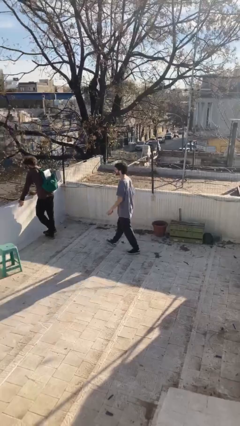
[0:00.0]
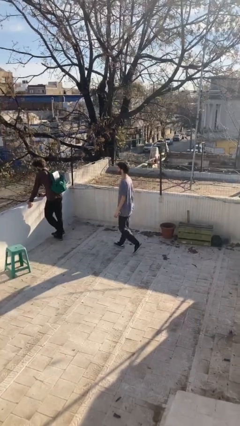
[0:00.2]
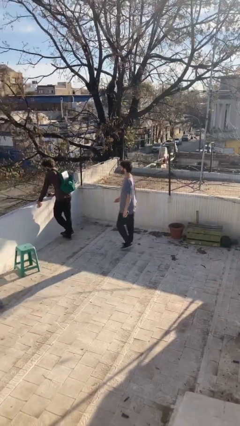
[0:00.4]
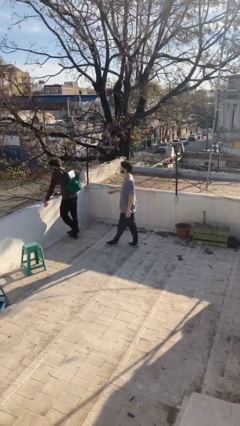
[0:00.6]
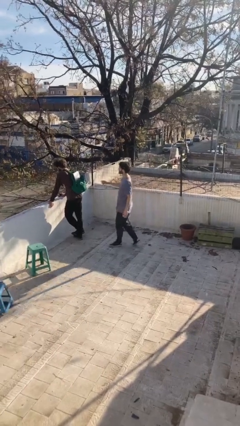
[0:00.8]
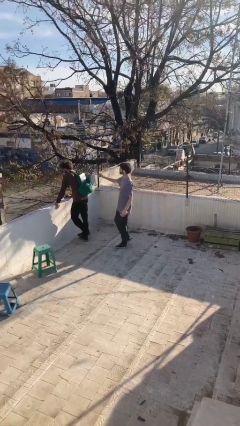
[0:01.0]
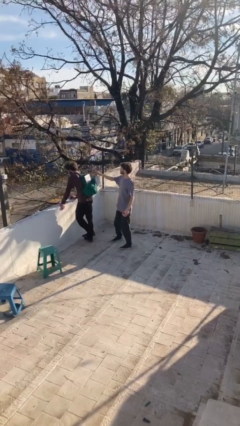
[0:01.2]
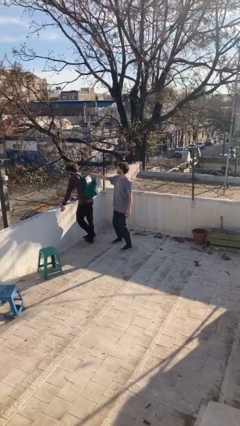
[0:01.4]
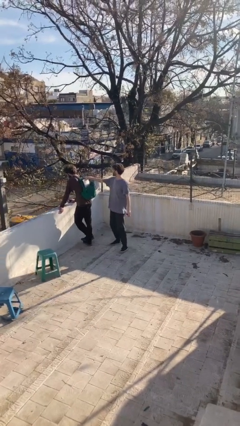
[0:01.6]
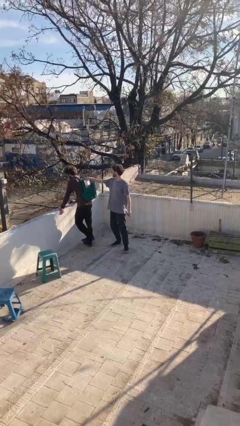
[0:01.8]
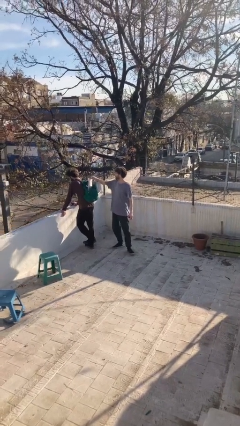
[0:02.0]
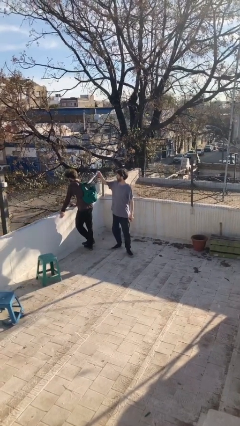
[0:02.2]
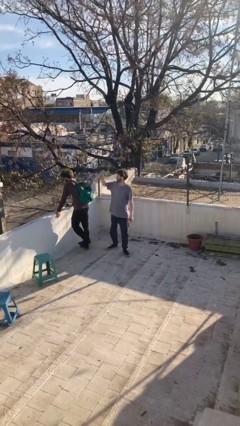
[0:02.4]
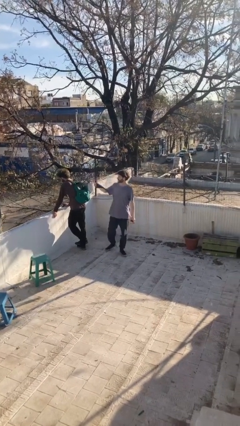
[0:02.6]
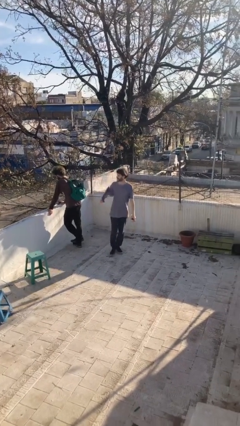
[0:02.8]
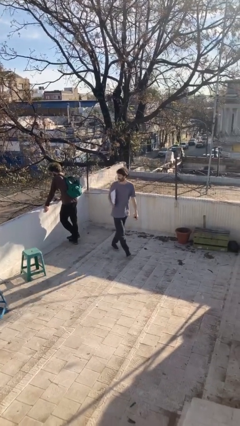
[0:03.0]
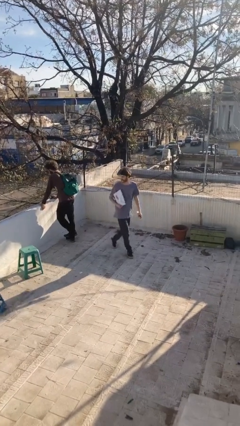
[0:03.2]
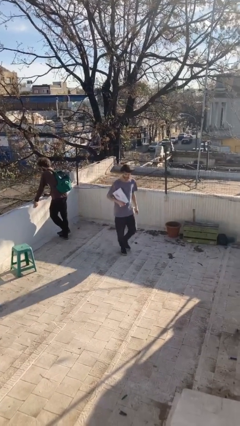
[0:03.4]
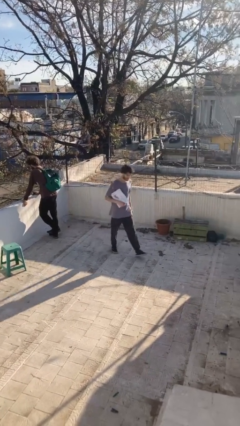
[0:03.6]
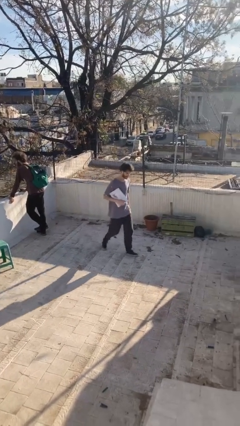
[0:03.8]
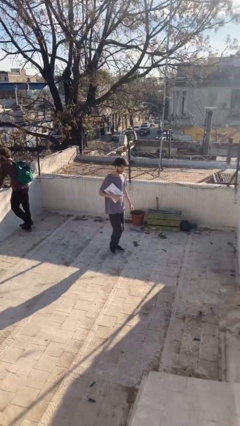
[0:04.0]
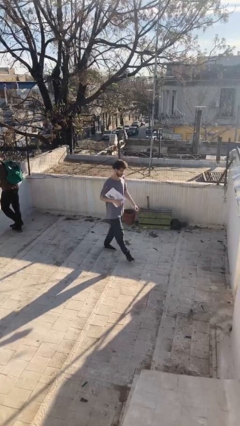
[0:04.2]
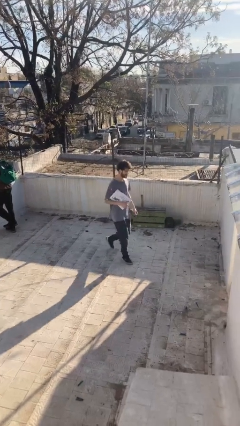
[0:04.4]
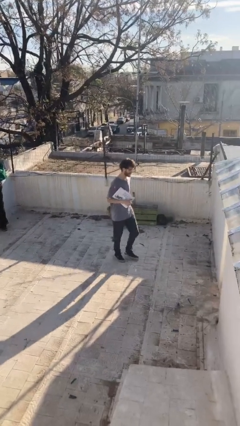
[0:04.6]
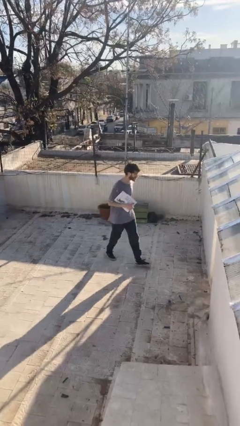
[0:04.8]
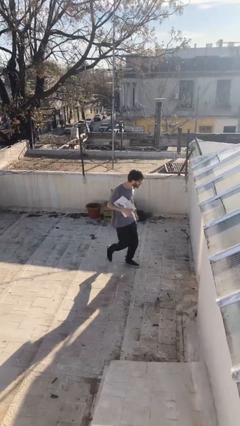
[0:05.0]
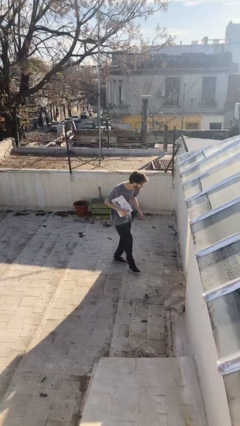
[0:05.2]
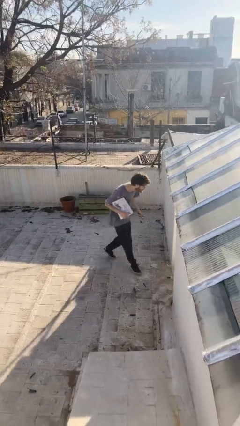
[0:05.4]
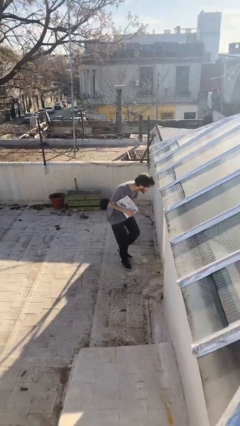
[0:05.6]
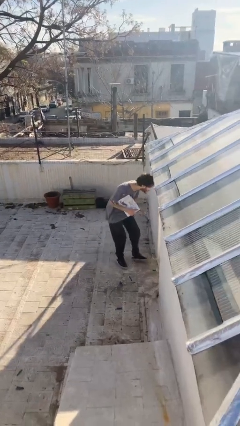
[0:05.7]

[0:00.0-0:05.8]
person steals object from person

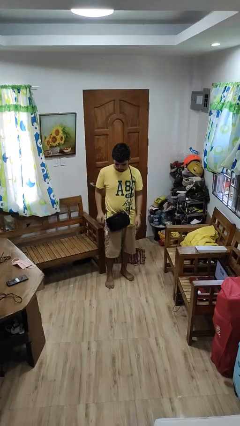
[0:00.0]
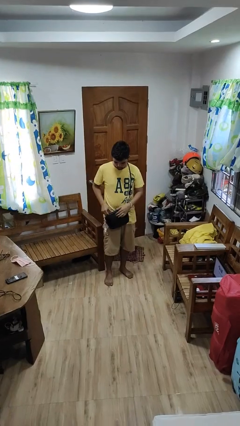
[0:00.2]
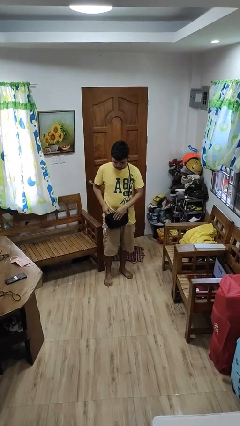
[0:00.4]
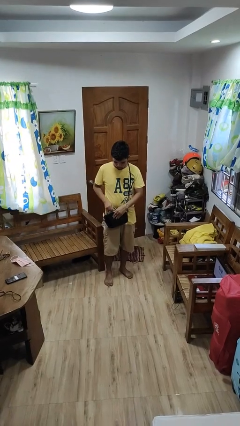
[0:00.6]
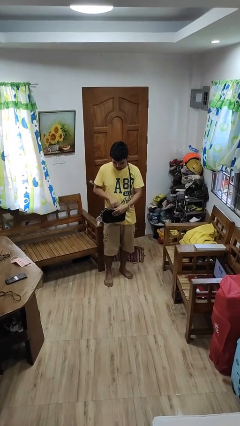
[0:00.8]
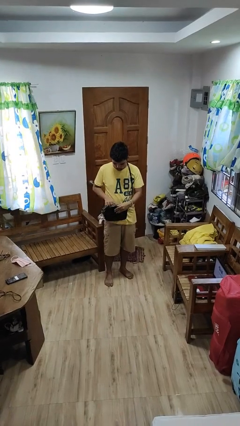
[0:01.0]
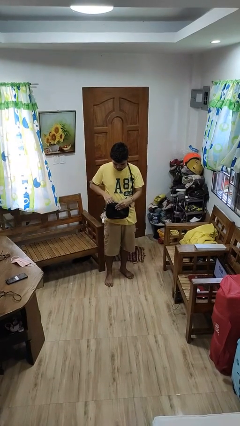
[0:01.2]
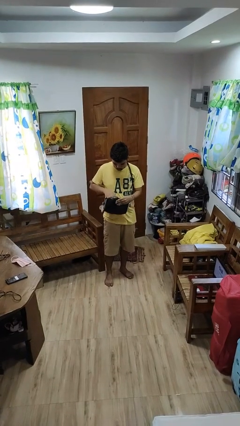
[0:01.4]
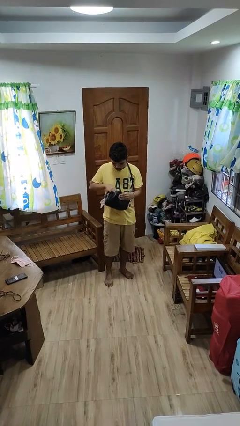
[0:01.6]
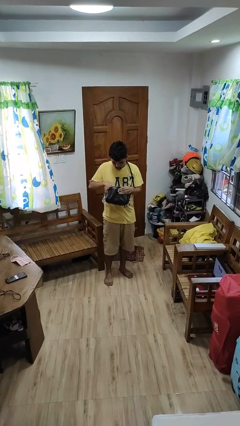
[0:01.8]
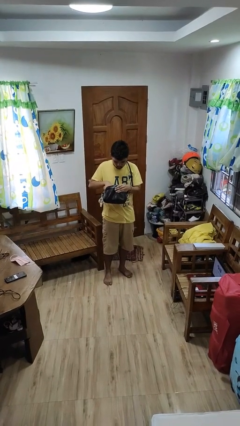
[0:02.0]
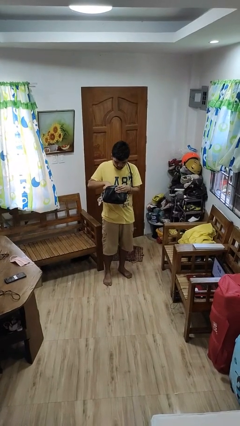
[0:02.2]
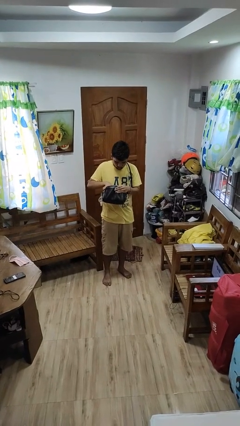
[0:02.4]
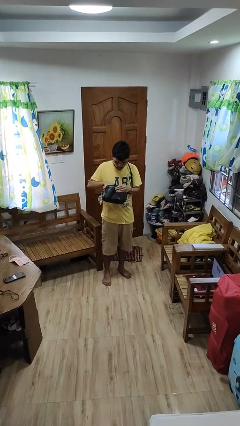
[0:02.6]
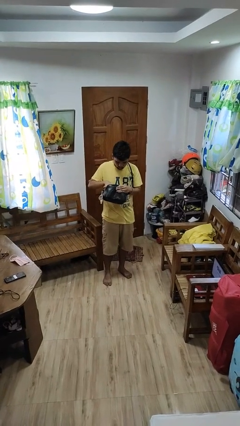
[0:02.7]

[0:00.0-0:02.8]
person searches in purse

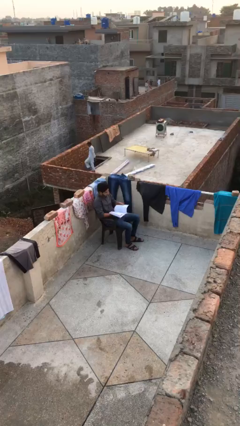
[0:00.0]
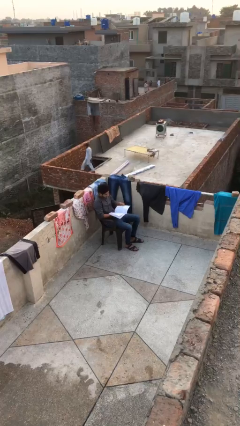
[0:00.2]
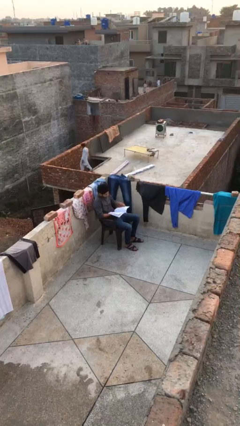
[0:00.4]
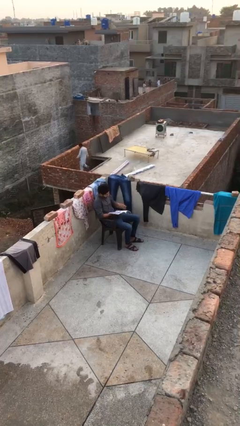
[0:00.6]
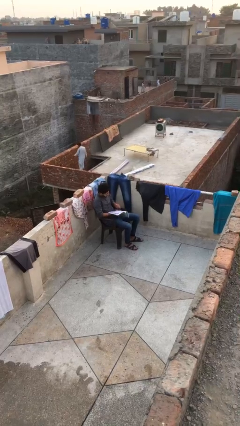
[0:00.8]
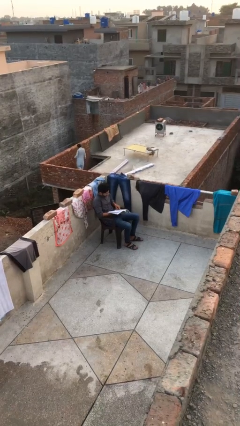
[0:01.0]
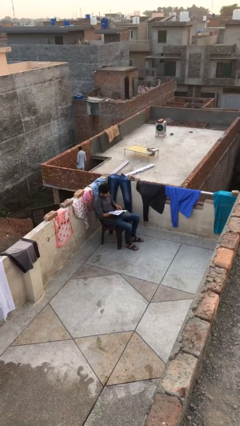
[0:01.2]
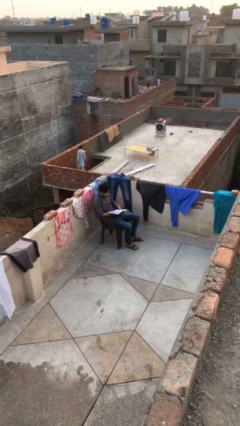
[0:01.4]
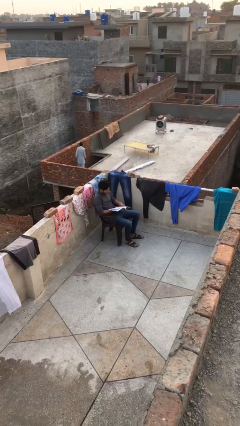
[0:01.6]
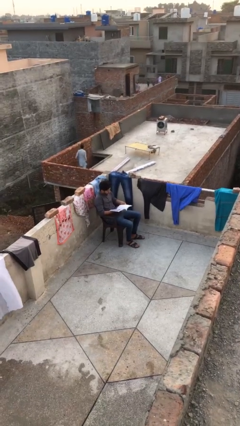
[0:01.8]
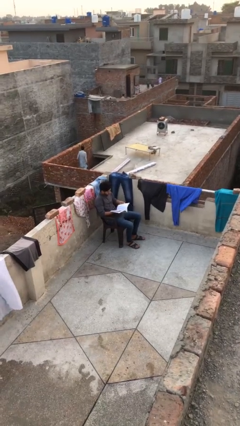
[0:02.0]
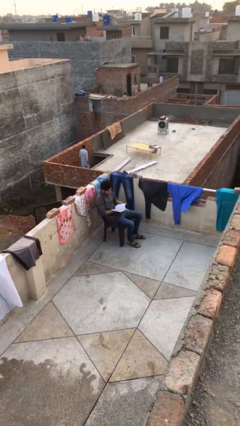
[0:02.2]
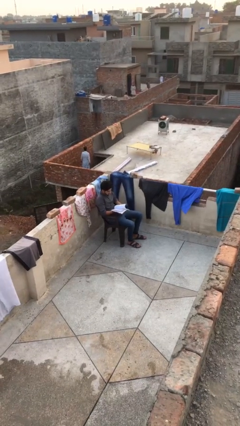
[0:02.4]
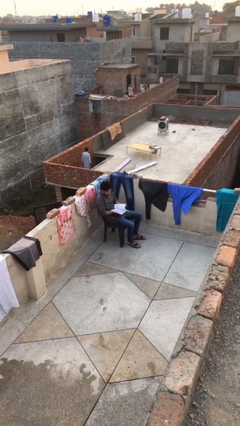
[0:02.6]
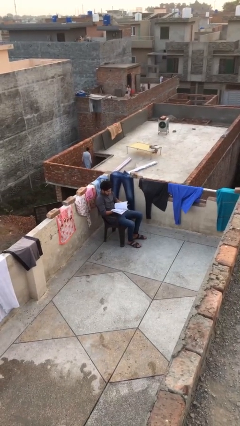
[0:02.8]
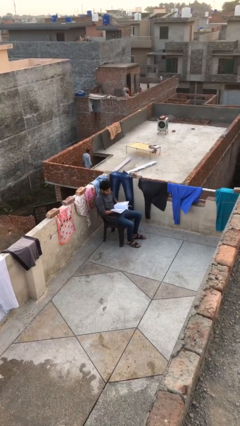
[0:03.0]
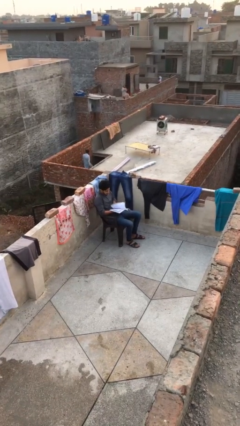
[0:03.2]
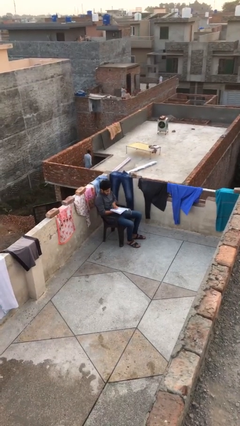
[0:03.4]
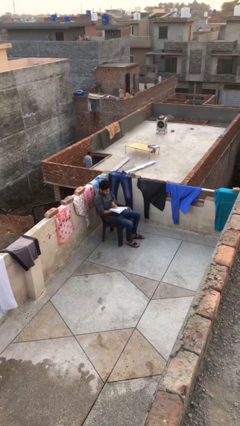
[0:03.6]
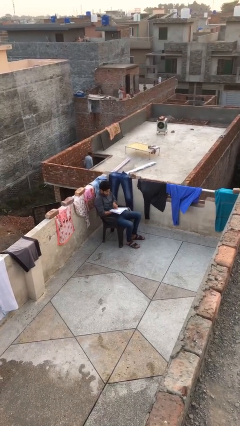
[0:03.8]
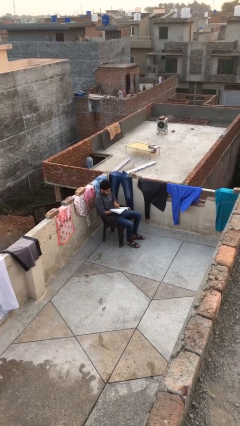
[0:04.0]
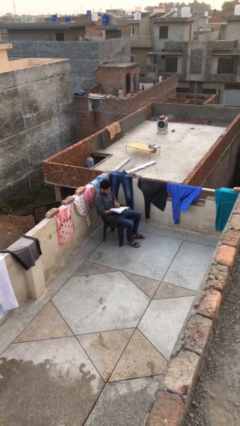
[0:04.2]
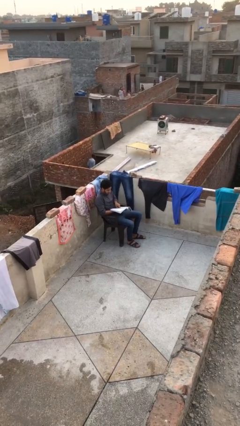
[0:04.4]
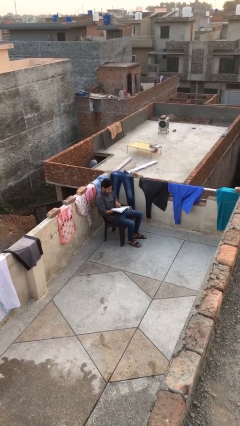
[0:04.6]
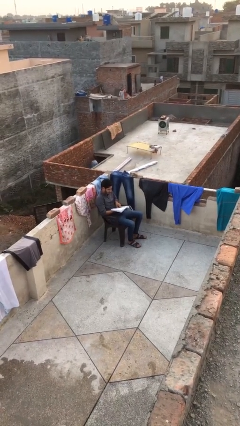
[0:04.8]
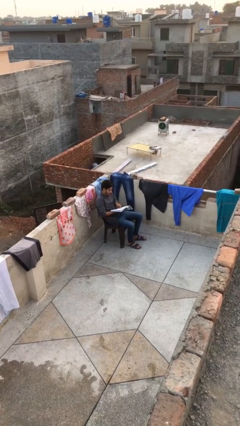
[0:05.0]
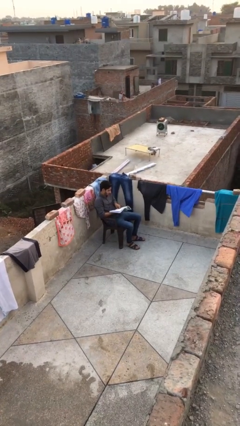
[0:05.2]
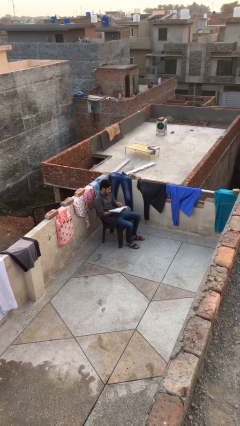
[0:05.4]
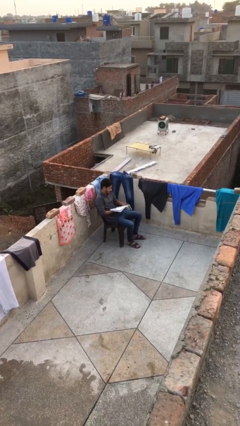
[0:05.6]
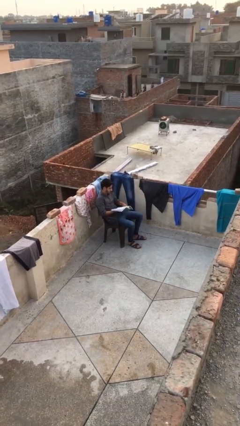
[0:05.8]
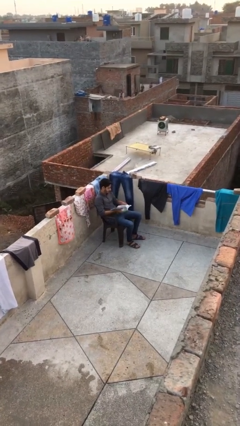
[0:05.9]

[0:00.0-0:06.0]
person reads document

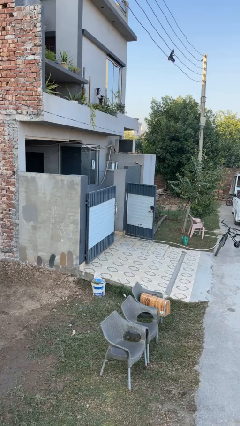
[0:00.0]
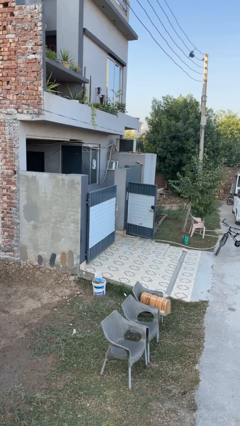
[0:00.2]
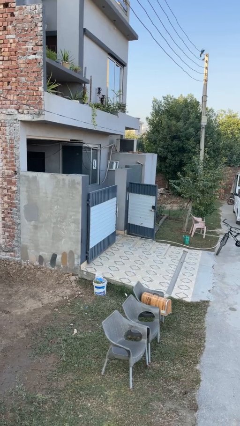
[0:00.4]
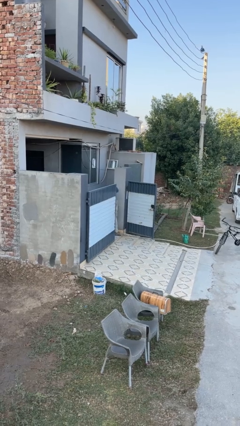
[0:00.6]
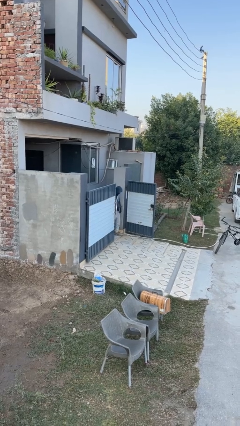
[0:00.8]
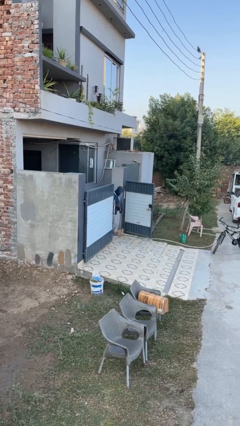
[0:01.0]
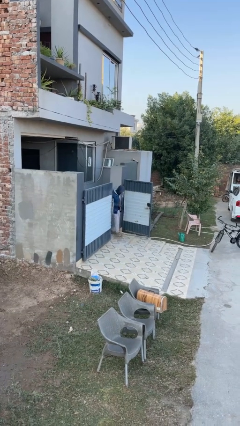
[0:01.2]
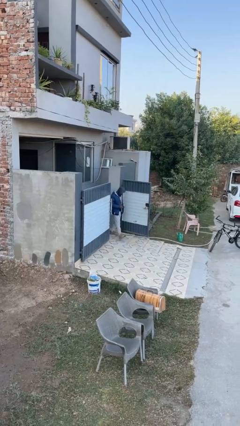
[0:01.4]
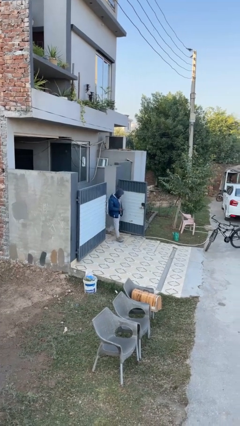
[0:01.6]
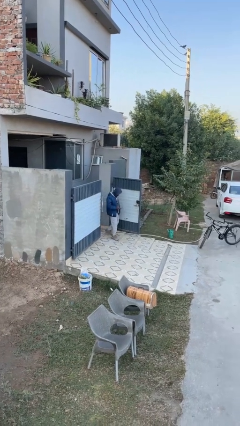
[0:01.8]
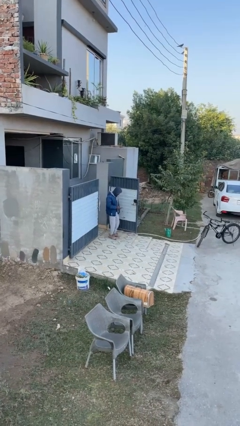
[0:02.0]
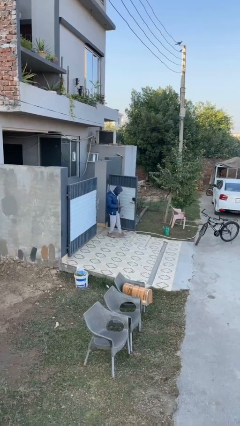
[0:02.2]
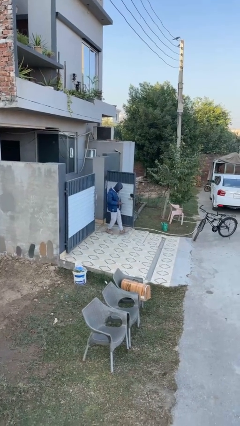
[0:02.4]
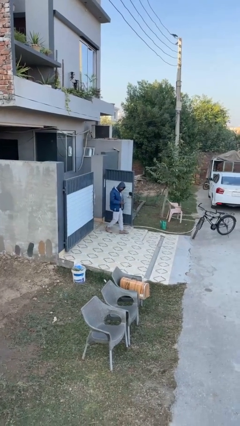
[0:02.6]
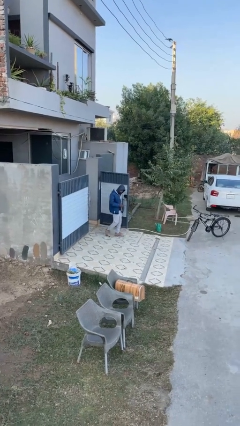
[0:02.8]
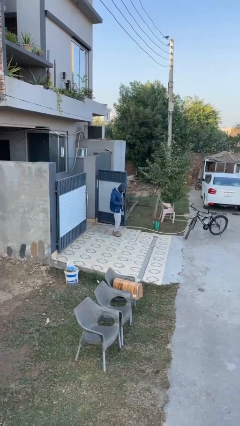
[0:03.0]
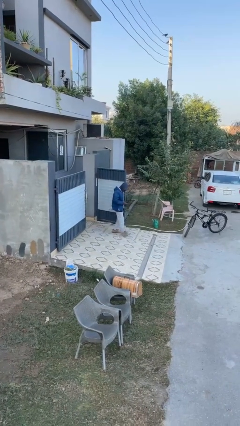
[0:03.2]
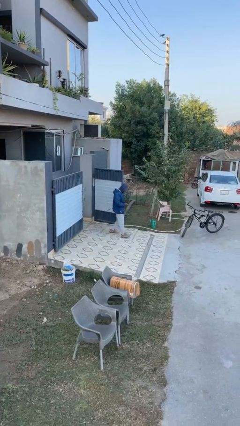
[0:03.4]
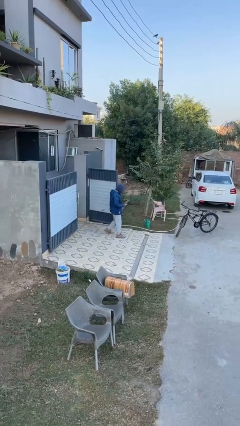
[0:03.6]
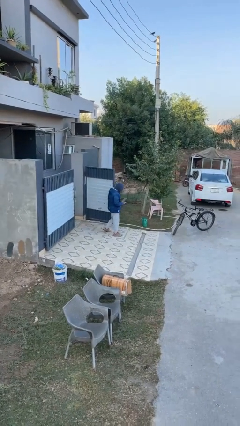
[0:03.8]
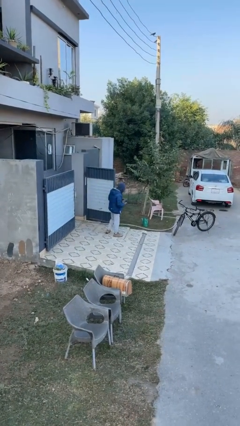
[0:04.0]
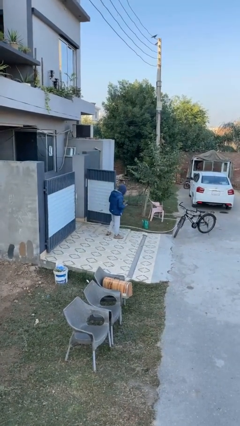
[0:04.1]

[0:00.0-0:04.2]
person enters scene through structure
